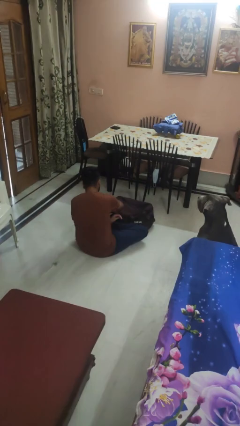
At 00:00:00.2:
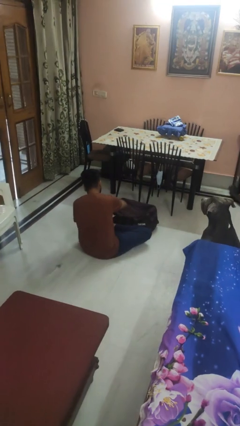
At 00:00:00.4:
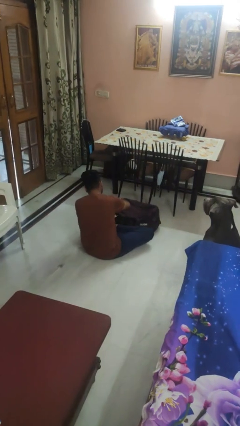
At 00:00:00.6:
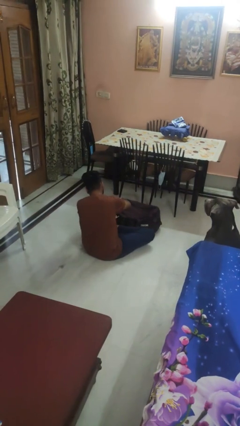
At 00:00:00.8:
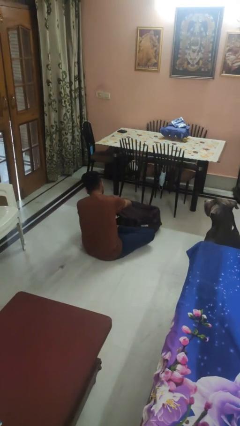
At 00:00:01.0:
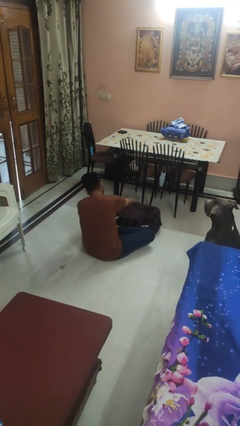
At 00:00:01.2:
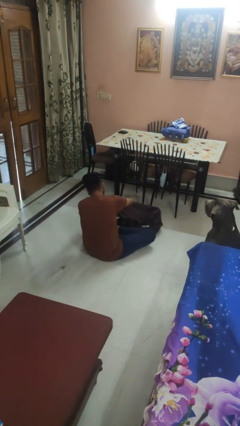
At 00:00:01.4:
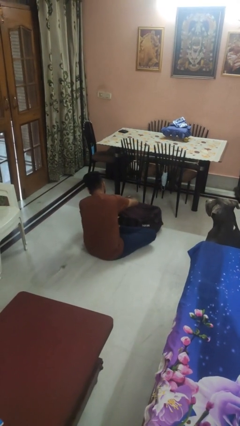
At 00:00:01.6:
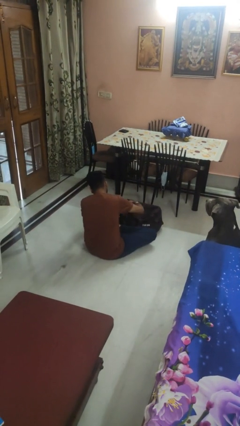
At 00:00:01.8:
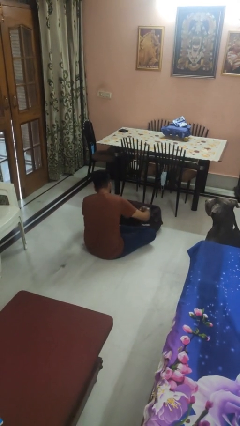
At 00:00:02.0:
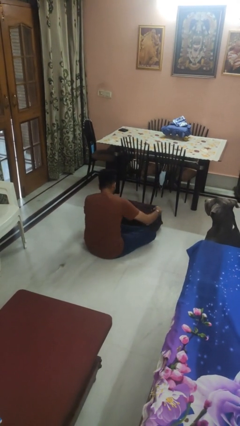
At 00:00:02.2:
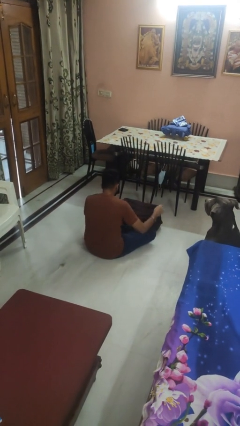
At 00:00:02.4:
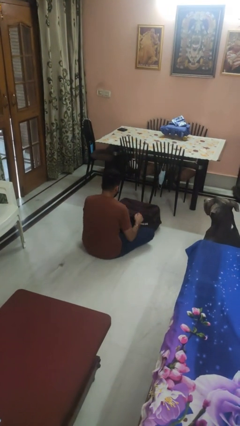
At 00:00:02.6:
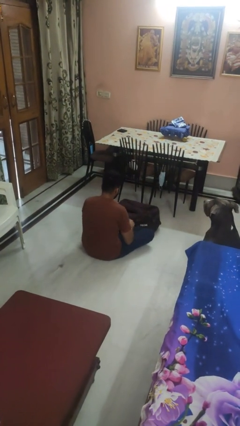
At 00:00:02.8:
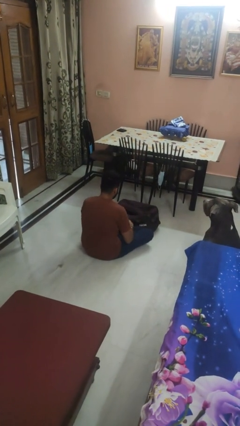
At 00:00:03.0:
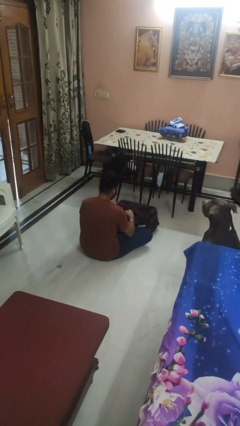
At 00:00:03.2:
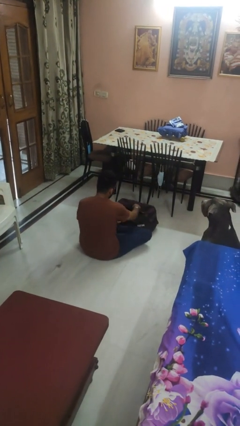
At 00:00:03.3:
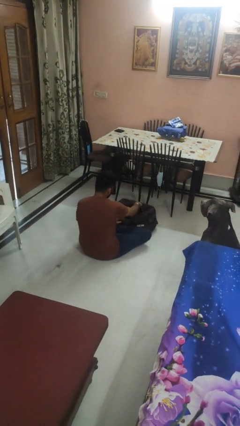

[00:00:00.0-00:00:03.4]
person opens suitcase

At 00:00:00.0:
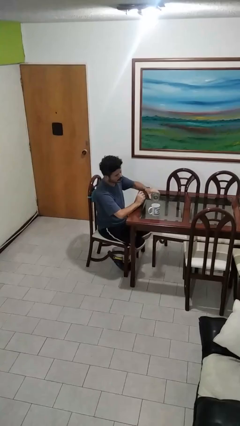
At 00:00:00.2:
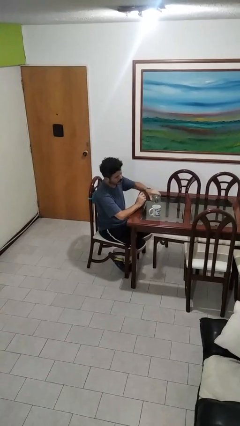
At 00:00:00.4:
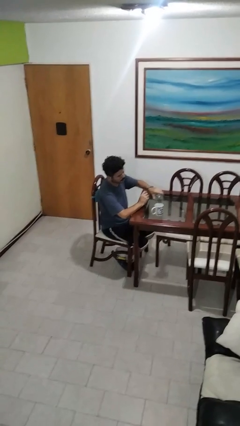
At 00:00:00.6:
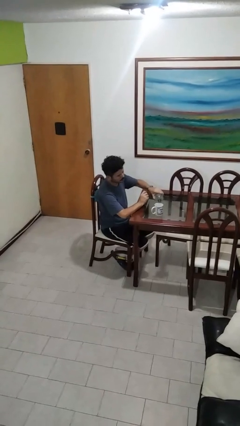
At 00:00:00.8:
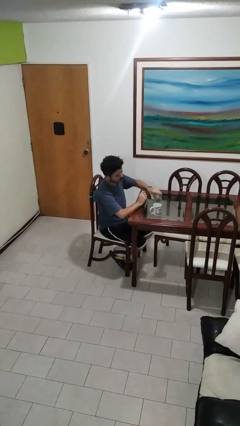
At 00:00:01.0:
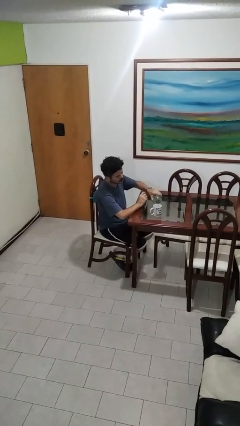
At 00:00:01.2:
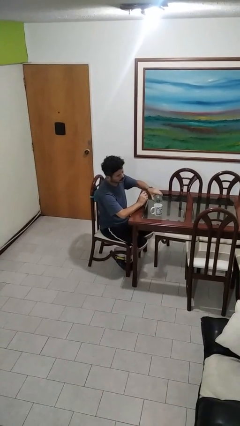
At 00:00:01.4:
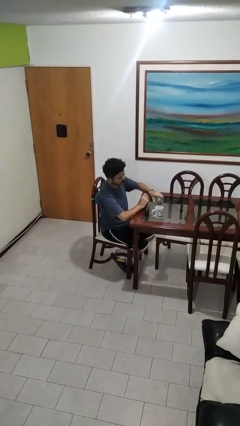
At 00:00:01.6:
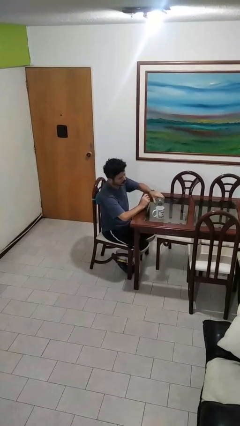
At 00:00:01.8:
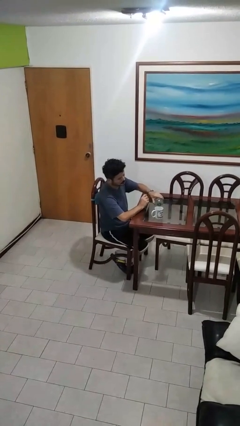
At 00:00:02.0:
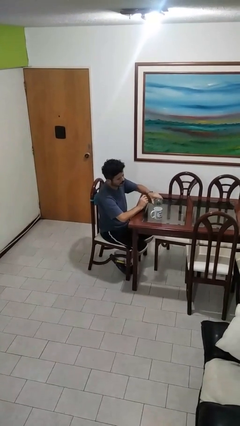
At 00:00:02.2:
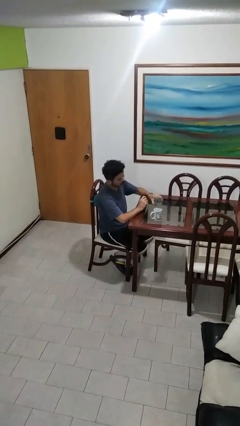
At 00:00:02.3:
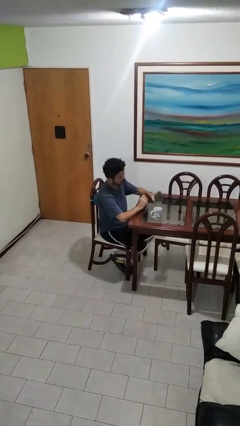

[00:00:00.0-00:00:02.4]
person pours liquid into cup

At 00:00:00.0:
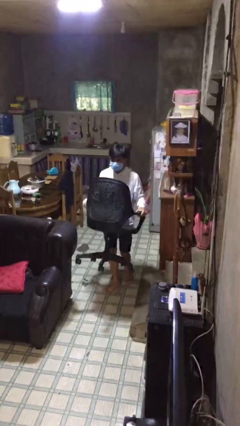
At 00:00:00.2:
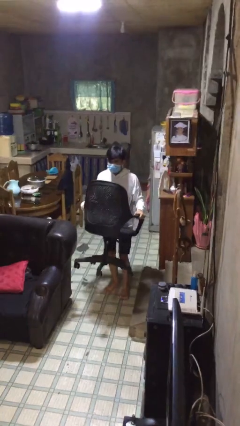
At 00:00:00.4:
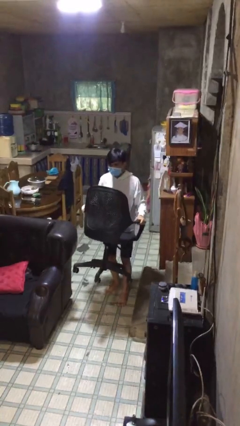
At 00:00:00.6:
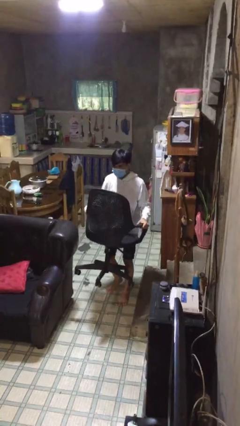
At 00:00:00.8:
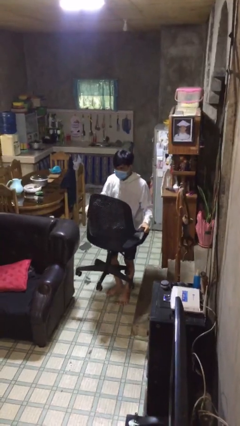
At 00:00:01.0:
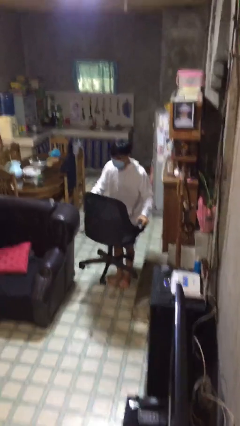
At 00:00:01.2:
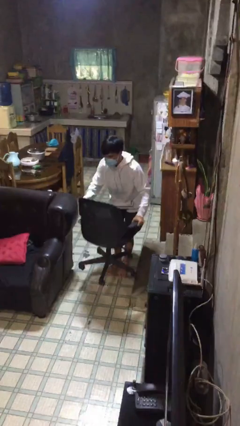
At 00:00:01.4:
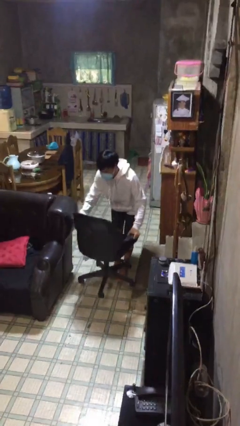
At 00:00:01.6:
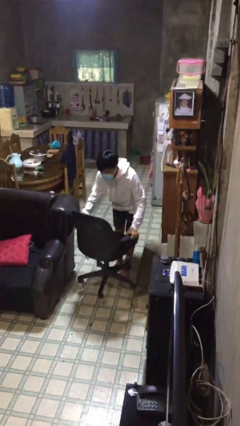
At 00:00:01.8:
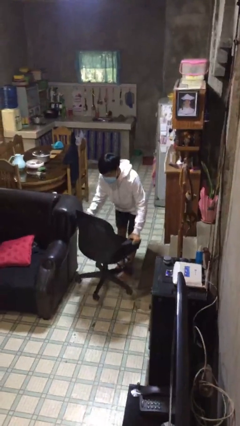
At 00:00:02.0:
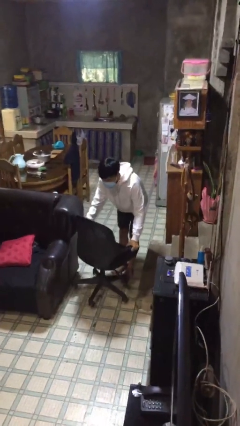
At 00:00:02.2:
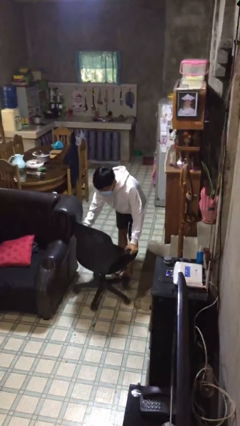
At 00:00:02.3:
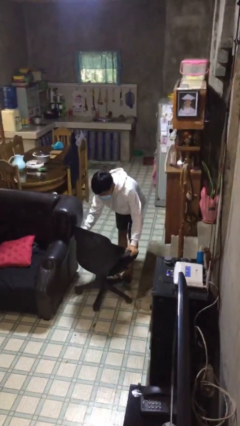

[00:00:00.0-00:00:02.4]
person puts down object on floor

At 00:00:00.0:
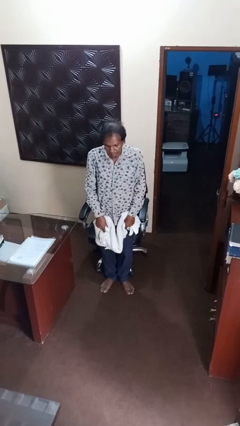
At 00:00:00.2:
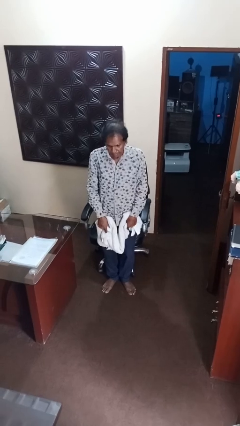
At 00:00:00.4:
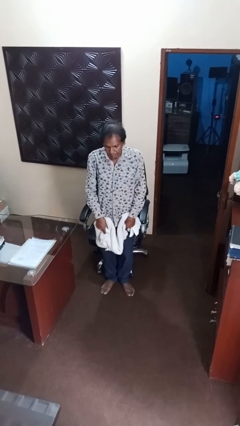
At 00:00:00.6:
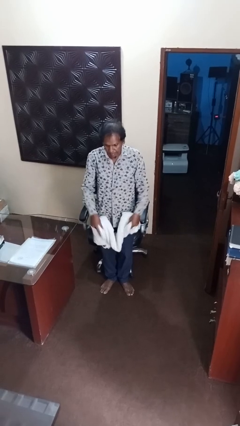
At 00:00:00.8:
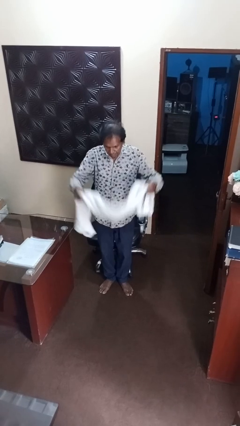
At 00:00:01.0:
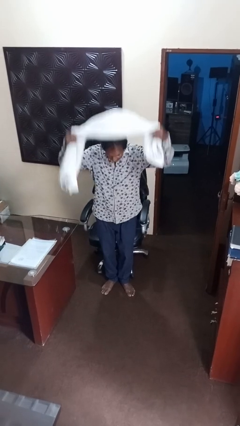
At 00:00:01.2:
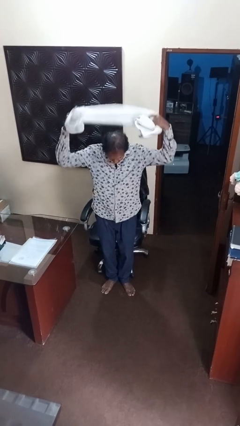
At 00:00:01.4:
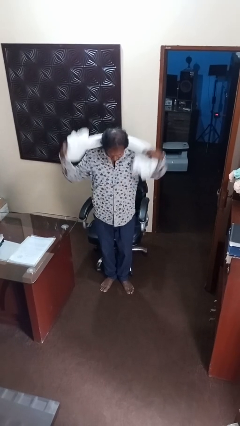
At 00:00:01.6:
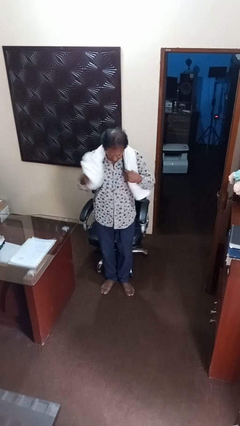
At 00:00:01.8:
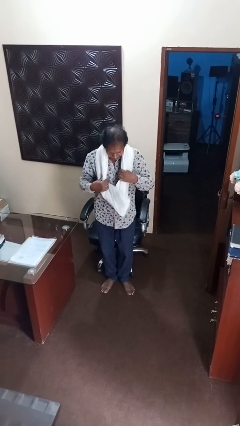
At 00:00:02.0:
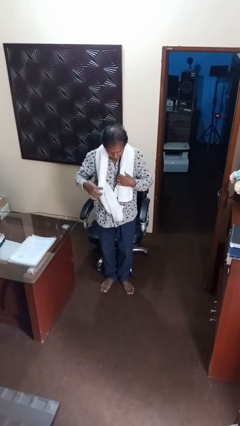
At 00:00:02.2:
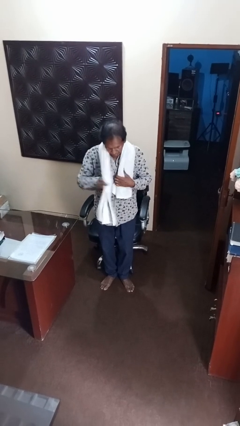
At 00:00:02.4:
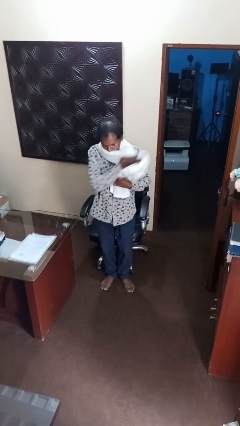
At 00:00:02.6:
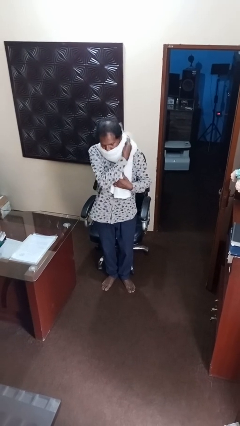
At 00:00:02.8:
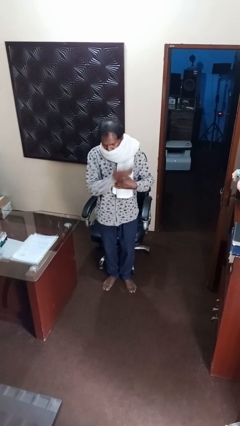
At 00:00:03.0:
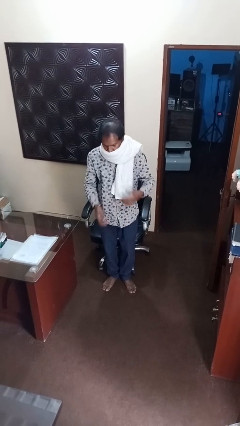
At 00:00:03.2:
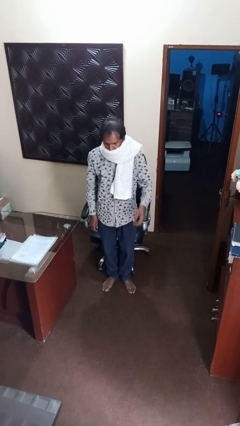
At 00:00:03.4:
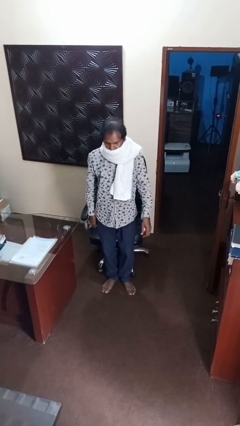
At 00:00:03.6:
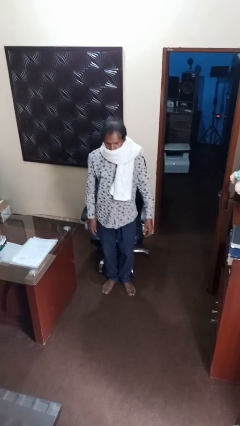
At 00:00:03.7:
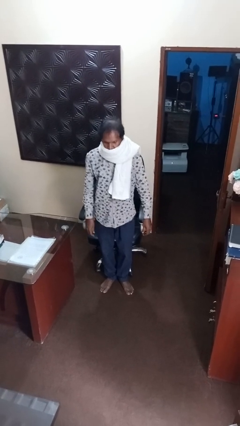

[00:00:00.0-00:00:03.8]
person puts on scarf

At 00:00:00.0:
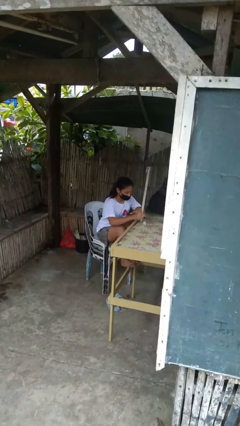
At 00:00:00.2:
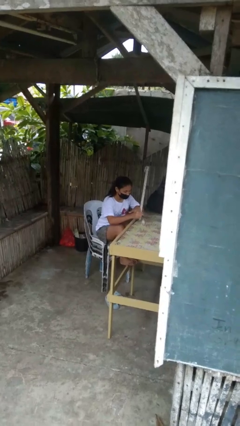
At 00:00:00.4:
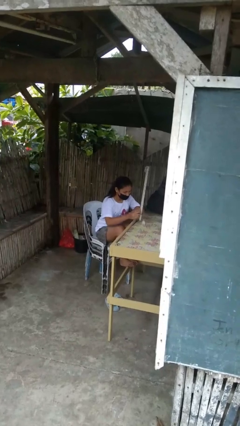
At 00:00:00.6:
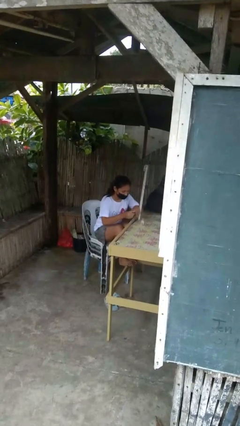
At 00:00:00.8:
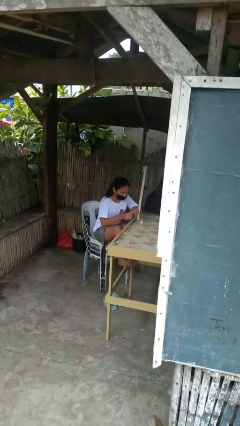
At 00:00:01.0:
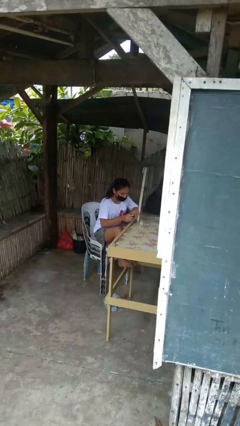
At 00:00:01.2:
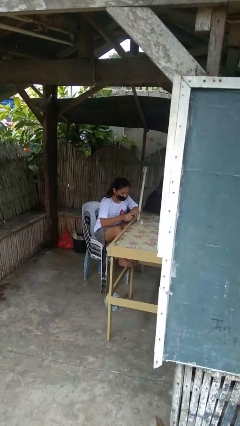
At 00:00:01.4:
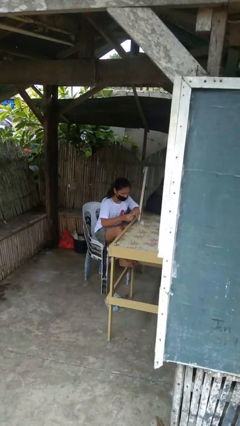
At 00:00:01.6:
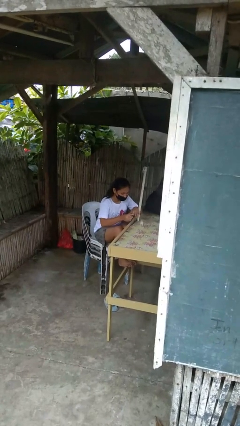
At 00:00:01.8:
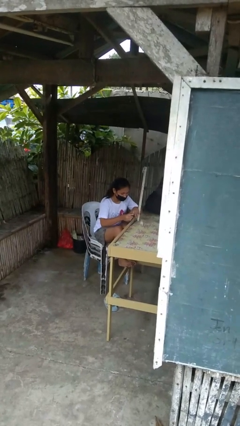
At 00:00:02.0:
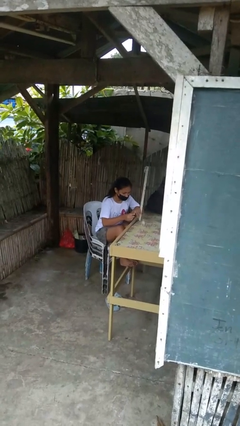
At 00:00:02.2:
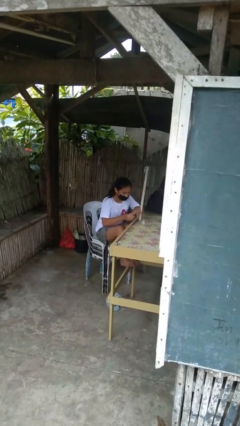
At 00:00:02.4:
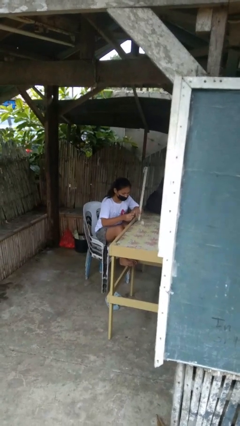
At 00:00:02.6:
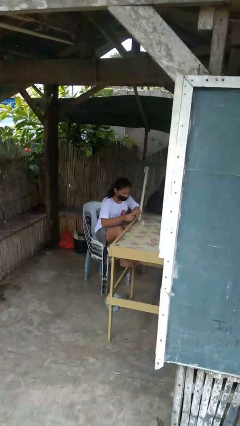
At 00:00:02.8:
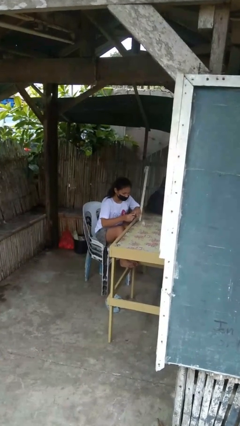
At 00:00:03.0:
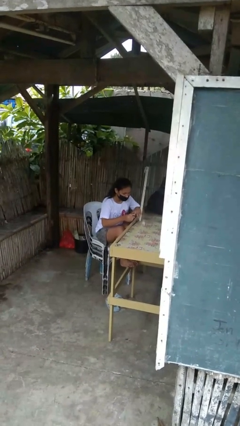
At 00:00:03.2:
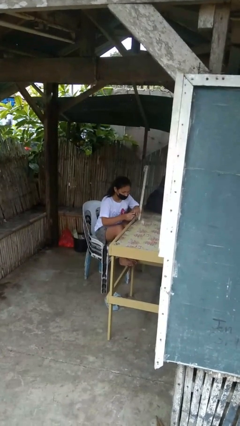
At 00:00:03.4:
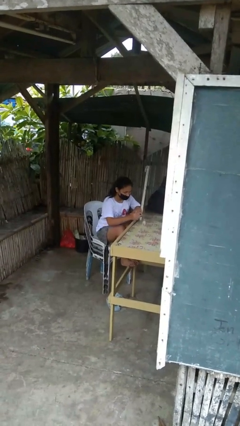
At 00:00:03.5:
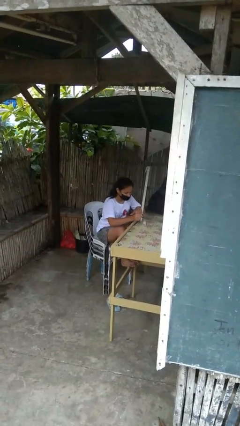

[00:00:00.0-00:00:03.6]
person paints fingernails

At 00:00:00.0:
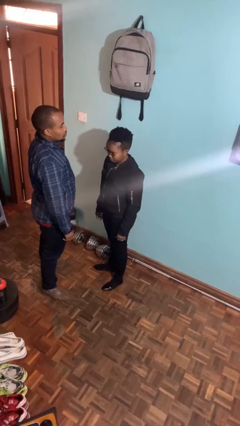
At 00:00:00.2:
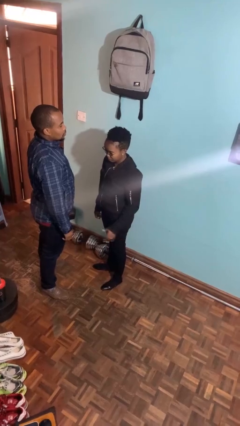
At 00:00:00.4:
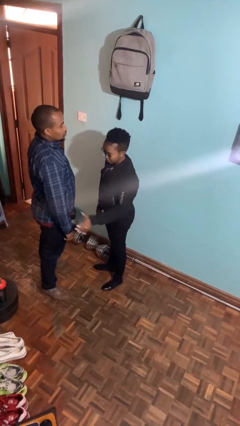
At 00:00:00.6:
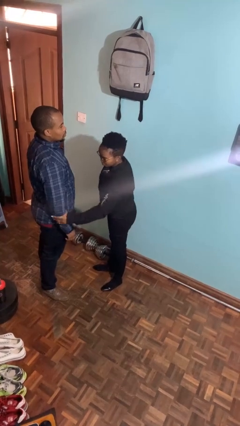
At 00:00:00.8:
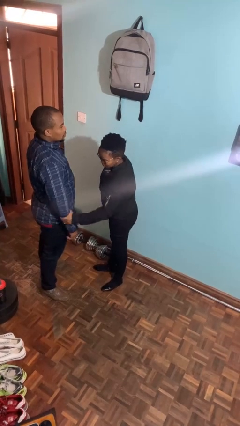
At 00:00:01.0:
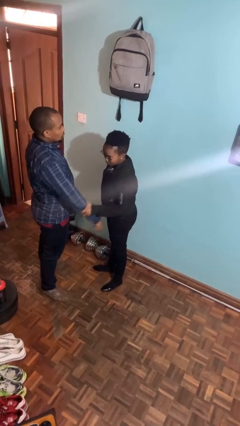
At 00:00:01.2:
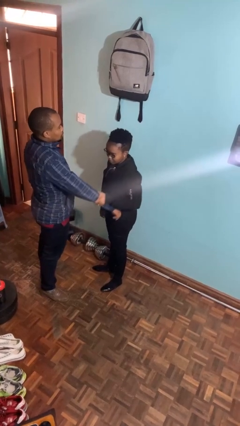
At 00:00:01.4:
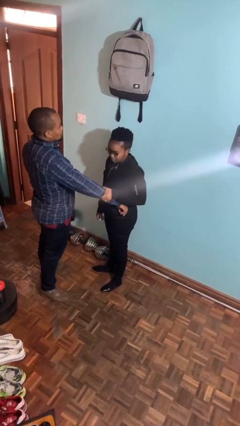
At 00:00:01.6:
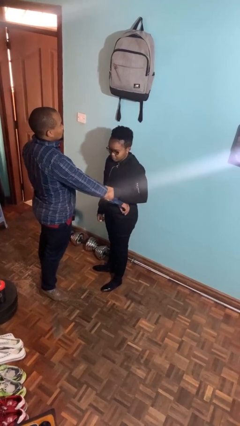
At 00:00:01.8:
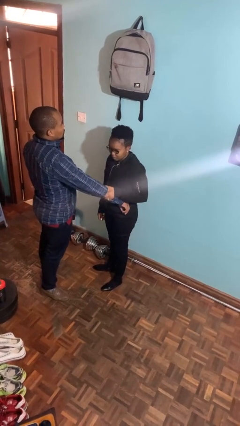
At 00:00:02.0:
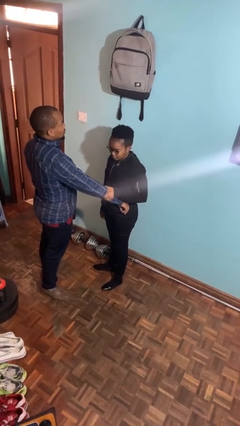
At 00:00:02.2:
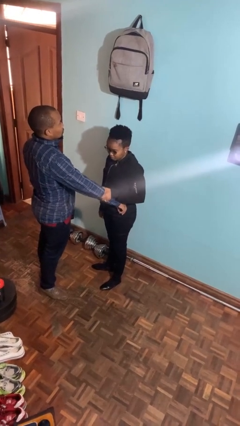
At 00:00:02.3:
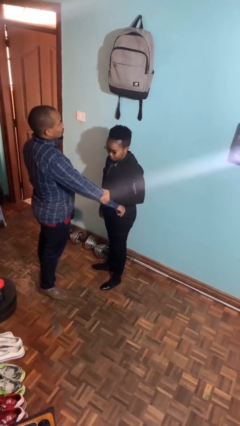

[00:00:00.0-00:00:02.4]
person grabs person by forearm
